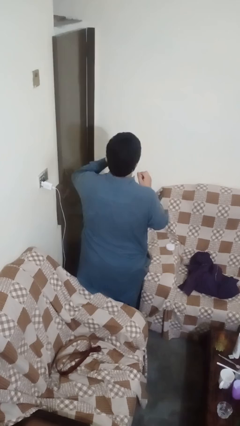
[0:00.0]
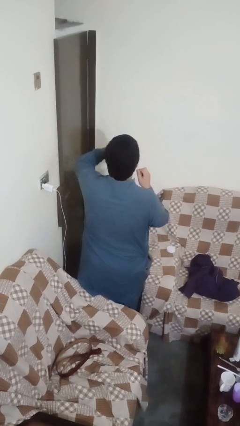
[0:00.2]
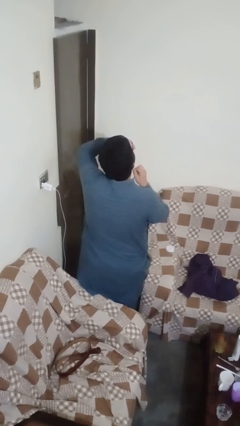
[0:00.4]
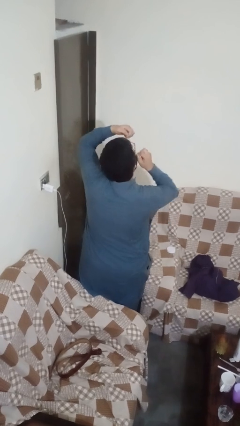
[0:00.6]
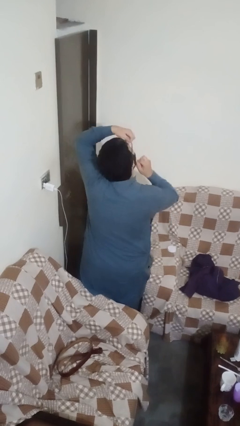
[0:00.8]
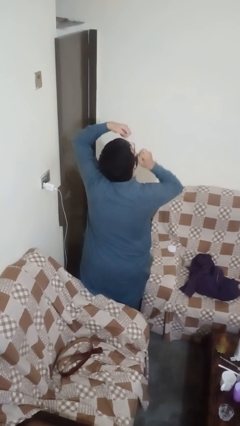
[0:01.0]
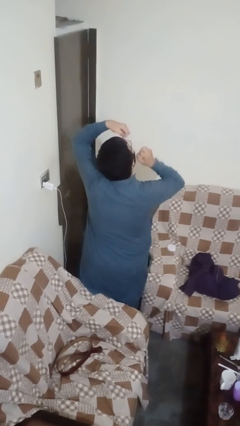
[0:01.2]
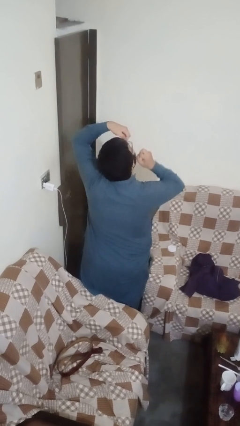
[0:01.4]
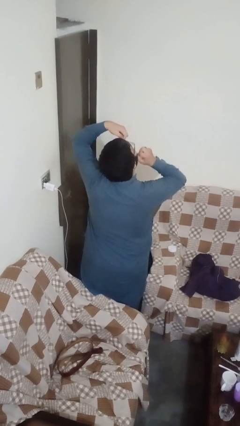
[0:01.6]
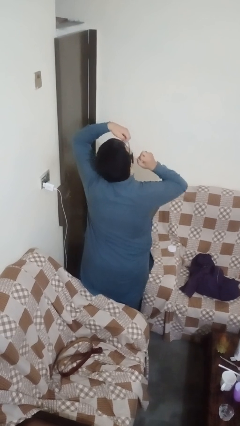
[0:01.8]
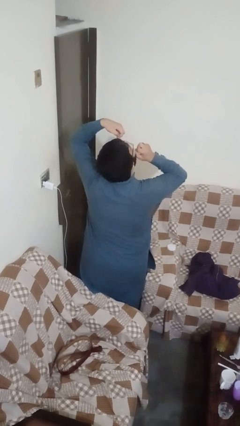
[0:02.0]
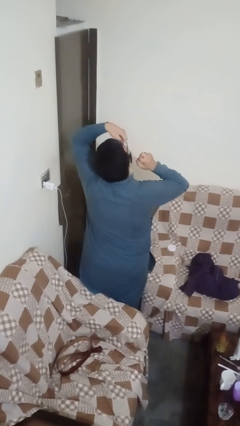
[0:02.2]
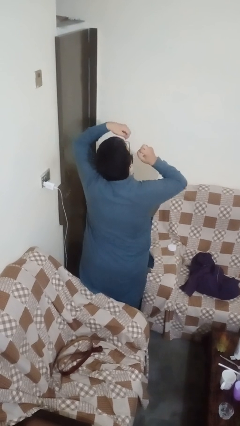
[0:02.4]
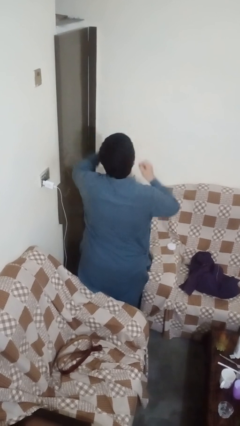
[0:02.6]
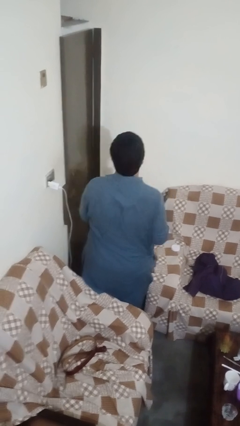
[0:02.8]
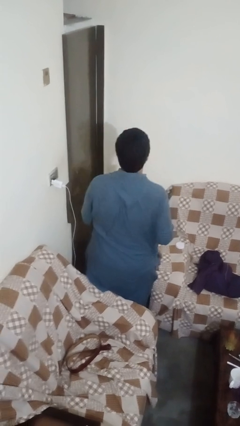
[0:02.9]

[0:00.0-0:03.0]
person flosses

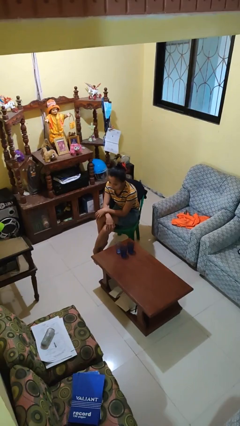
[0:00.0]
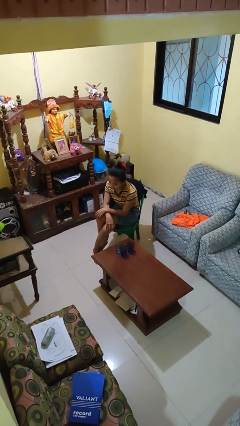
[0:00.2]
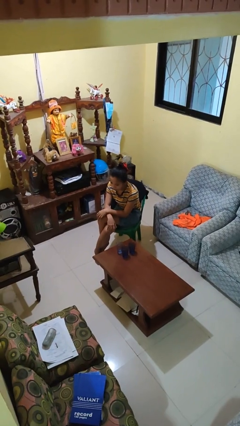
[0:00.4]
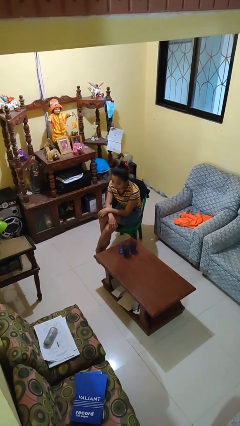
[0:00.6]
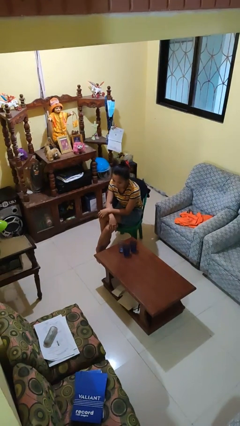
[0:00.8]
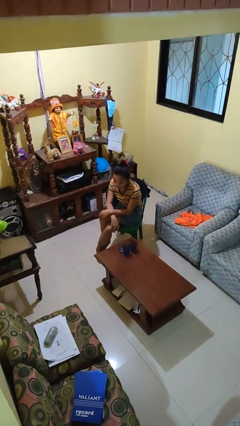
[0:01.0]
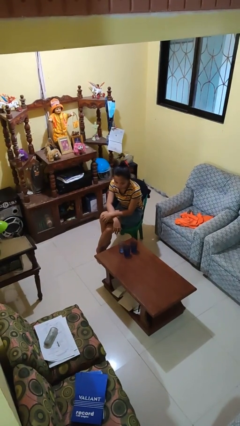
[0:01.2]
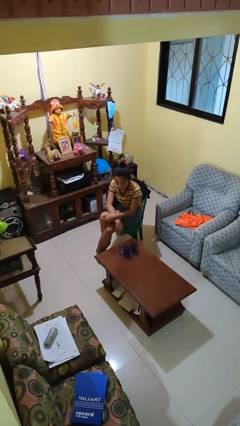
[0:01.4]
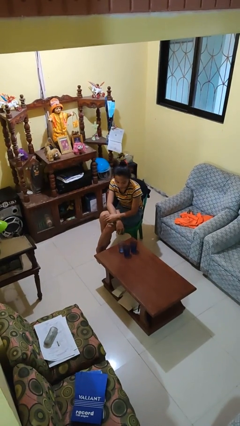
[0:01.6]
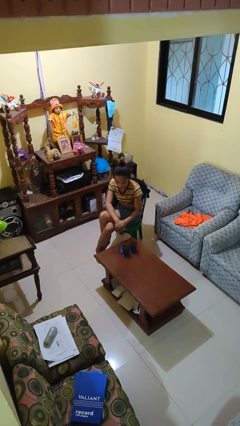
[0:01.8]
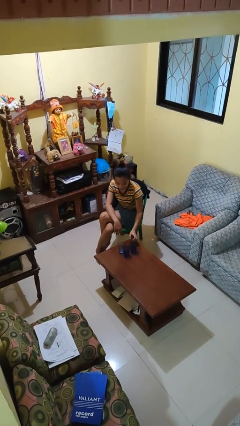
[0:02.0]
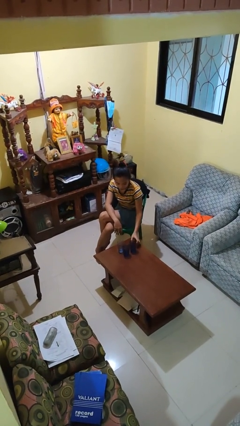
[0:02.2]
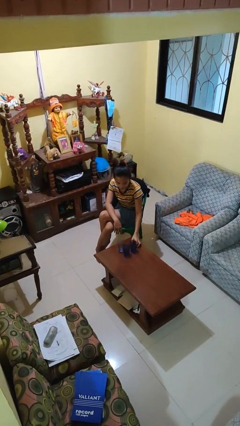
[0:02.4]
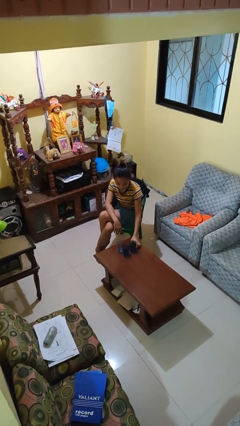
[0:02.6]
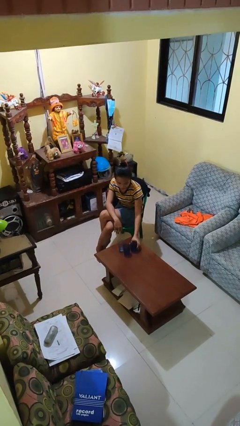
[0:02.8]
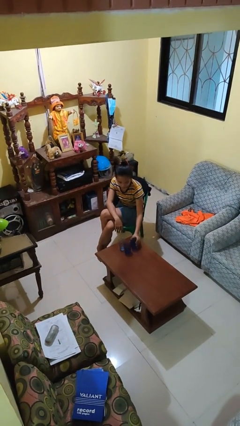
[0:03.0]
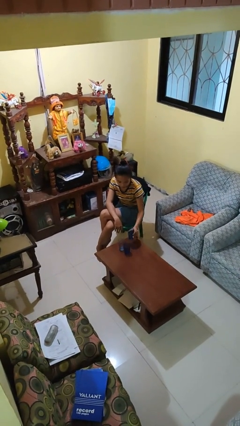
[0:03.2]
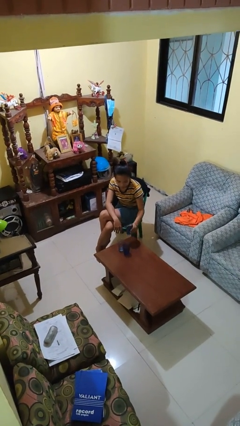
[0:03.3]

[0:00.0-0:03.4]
person picks up object from table

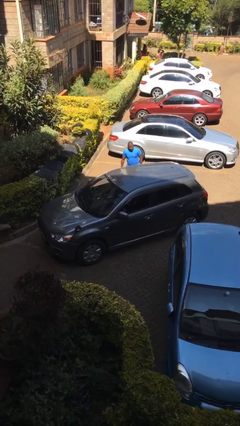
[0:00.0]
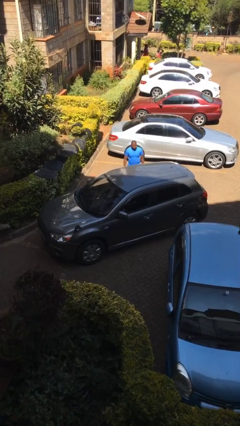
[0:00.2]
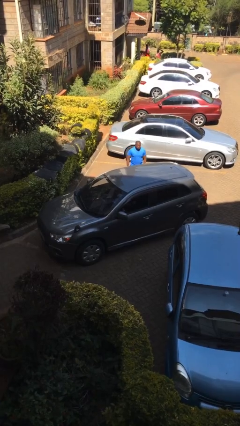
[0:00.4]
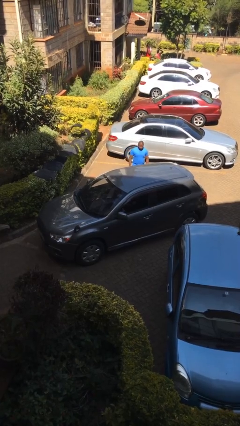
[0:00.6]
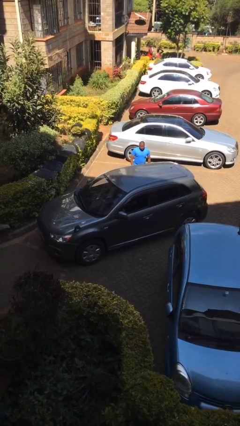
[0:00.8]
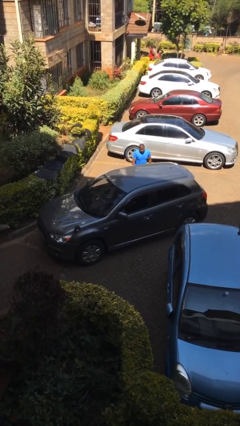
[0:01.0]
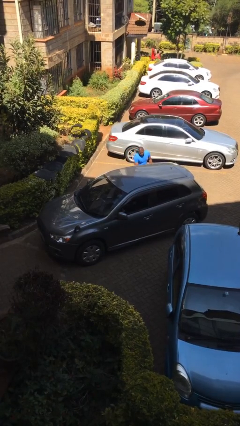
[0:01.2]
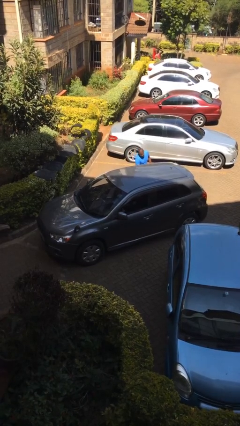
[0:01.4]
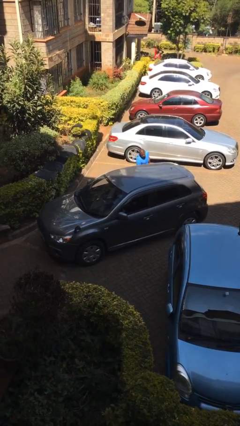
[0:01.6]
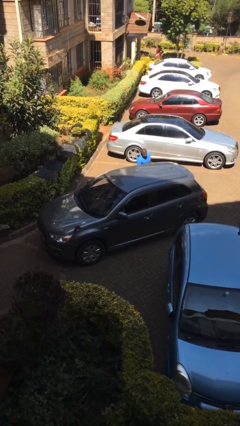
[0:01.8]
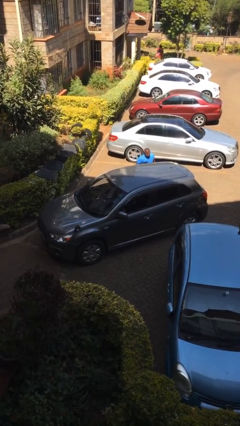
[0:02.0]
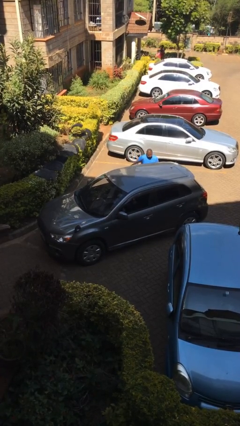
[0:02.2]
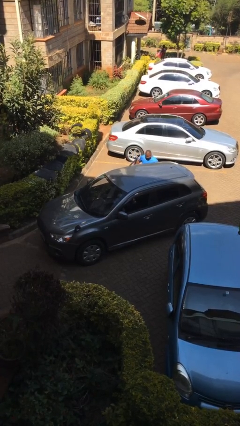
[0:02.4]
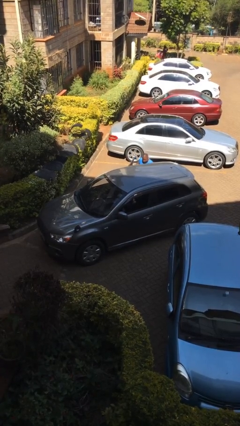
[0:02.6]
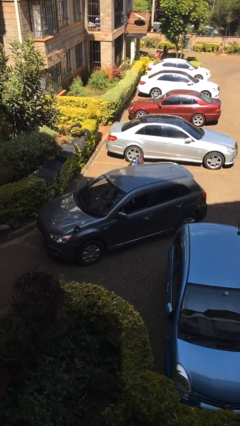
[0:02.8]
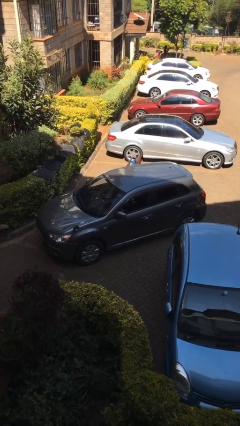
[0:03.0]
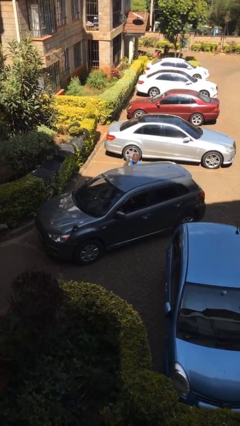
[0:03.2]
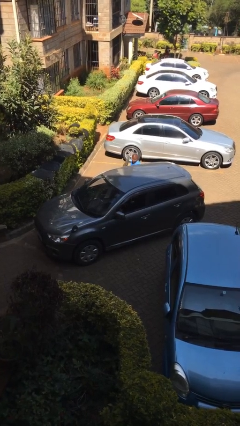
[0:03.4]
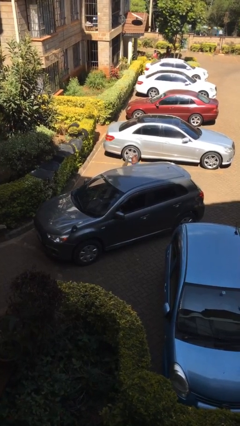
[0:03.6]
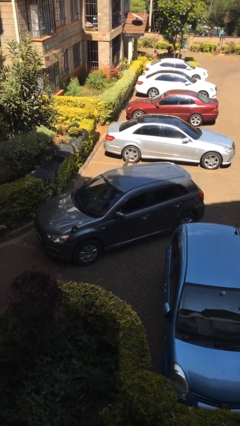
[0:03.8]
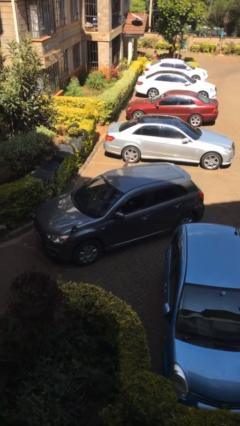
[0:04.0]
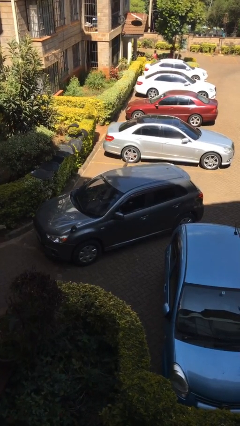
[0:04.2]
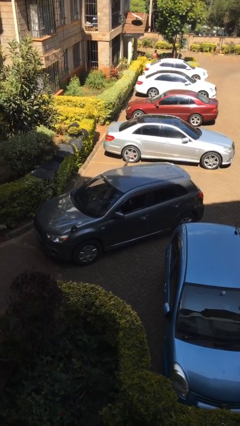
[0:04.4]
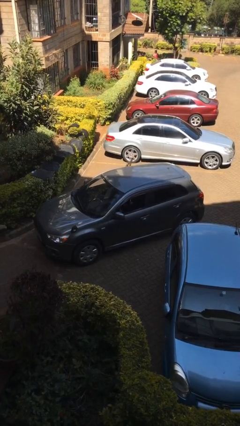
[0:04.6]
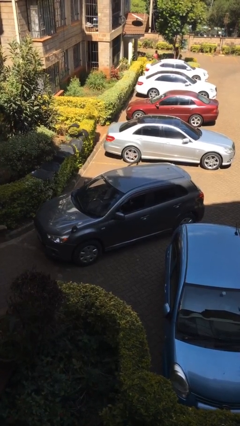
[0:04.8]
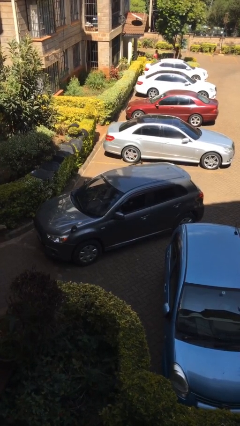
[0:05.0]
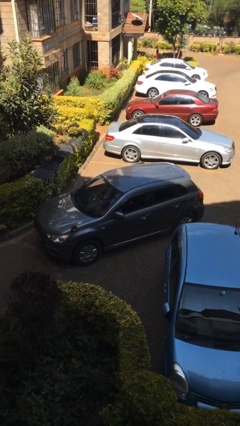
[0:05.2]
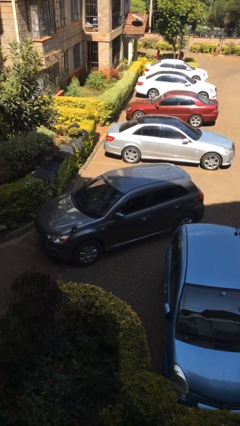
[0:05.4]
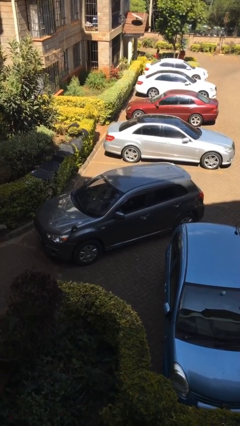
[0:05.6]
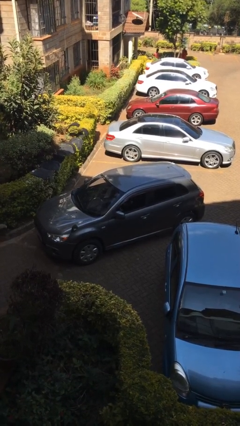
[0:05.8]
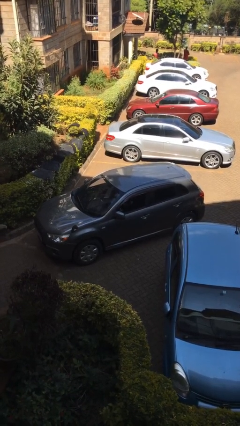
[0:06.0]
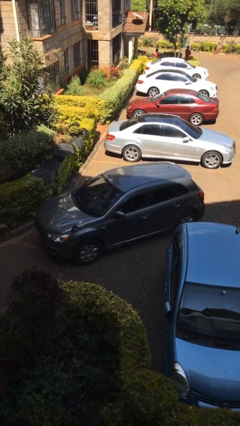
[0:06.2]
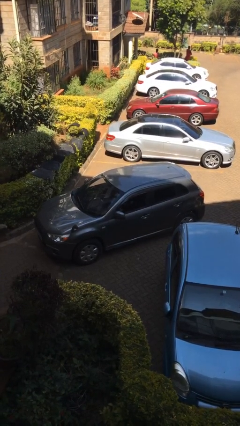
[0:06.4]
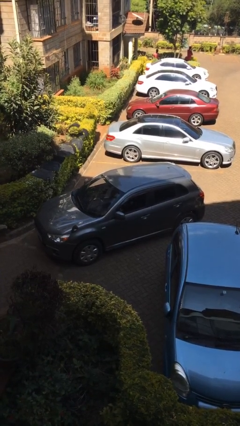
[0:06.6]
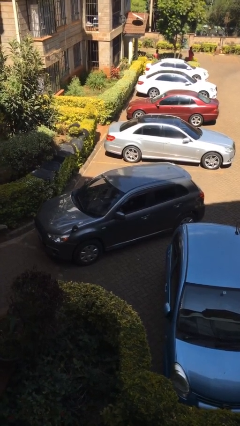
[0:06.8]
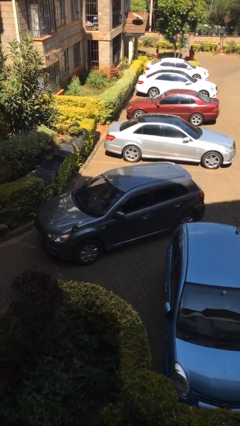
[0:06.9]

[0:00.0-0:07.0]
car picks up person

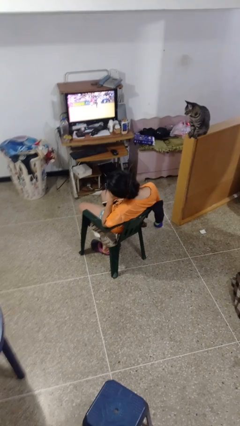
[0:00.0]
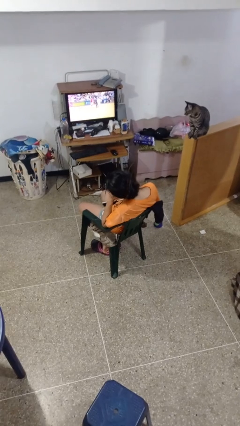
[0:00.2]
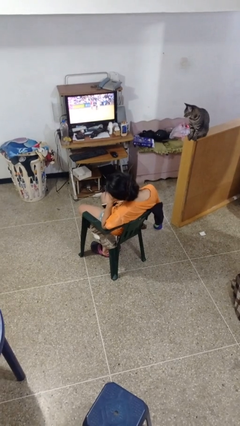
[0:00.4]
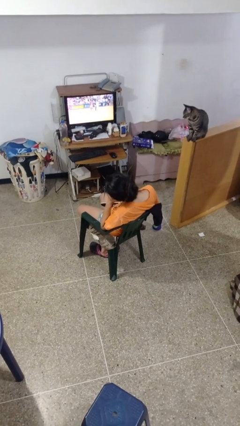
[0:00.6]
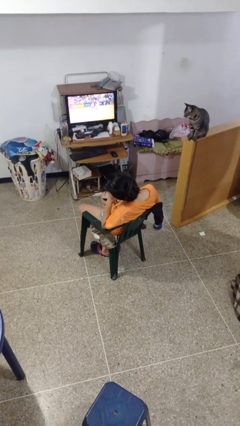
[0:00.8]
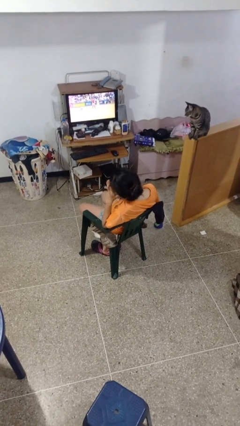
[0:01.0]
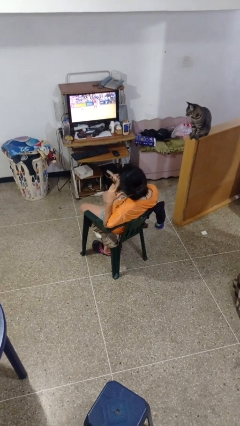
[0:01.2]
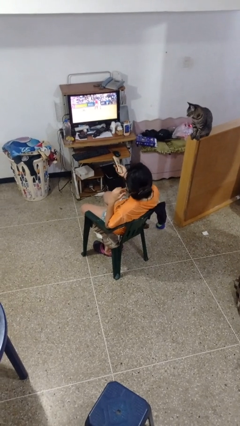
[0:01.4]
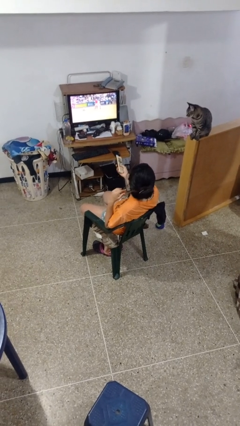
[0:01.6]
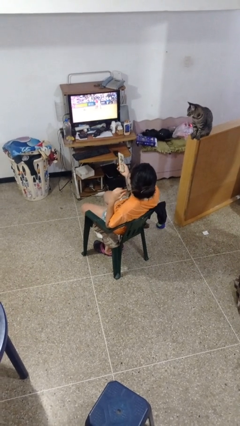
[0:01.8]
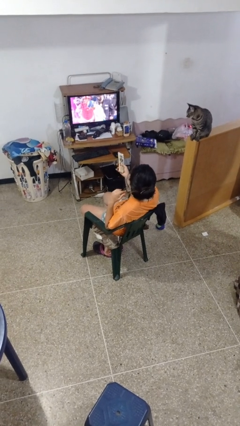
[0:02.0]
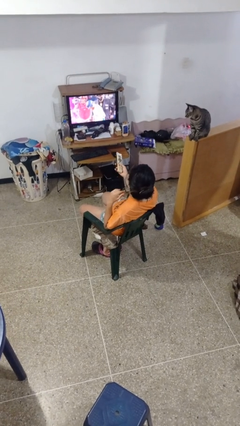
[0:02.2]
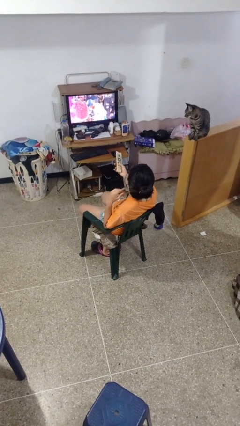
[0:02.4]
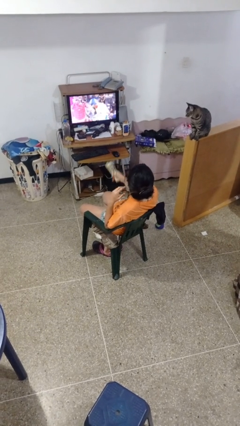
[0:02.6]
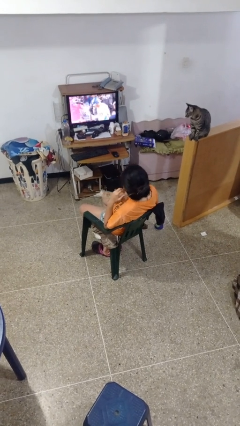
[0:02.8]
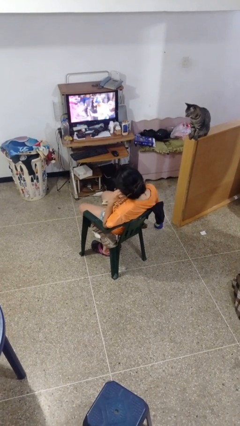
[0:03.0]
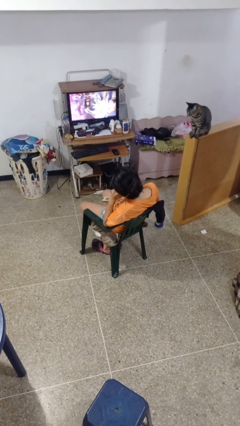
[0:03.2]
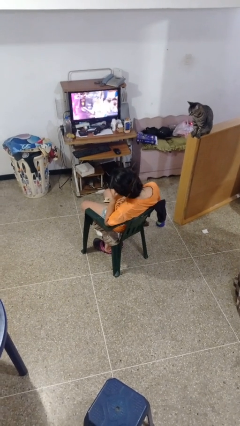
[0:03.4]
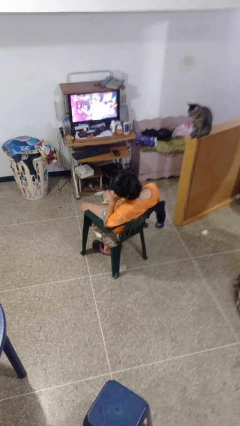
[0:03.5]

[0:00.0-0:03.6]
person uses television remote

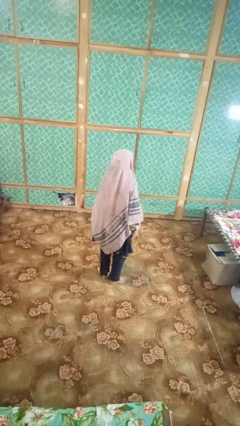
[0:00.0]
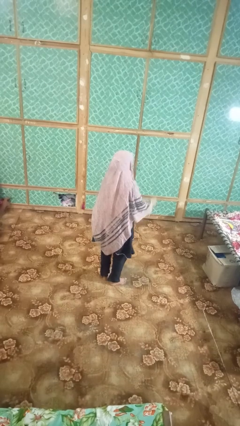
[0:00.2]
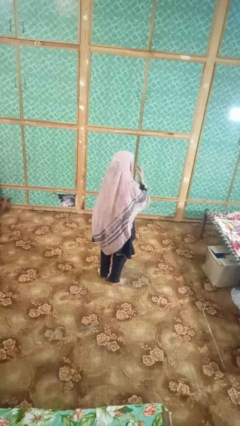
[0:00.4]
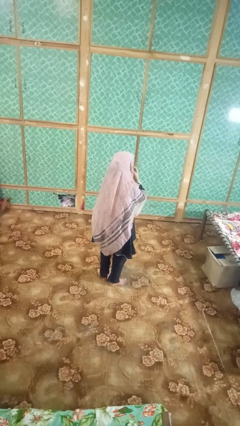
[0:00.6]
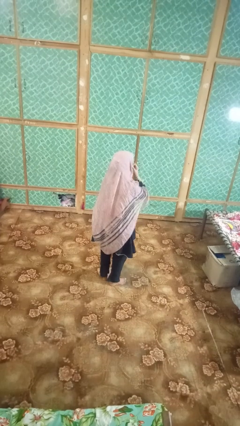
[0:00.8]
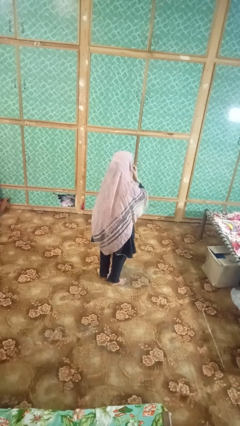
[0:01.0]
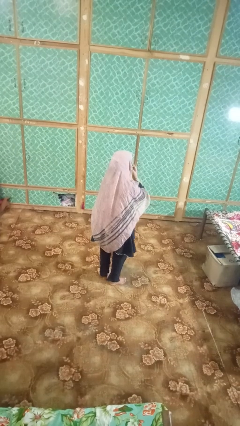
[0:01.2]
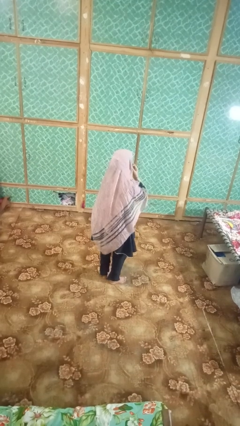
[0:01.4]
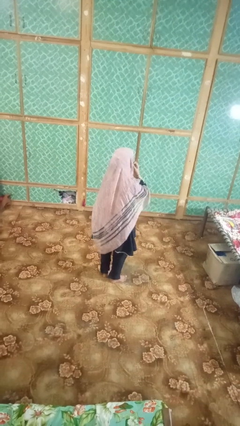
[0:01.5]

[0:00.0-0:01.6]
person strokes chin
